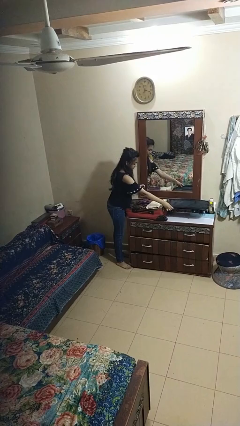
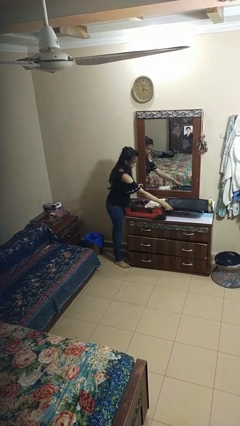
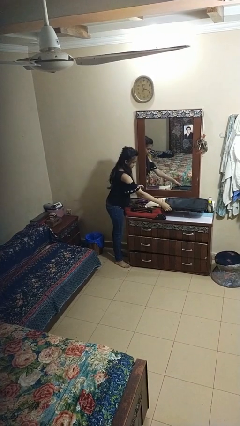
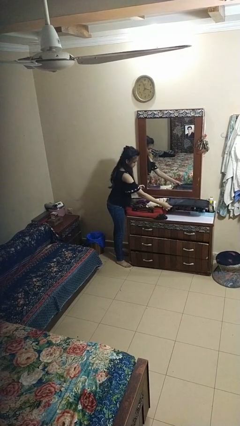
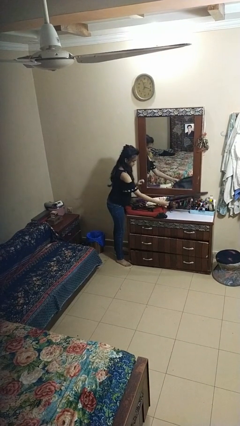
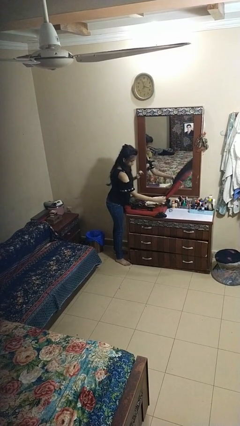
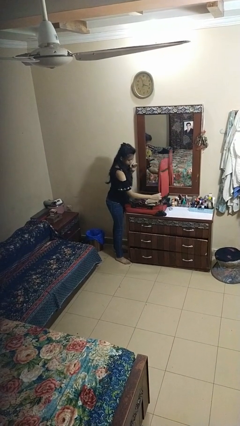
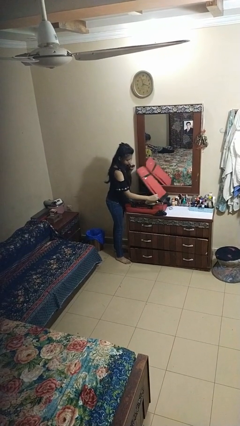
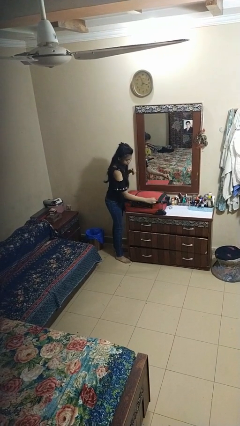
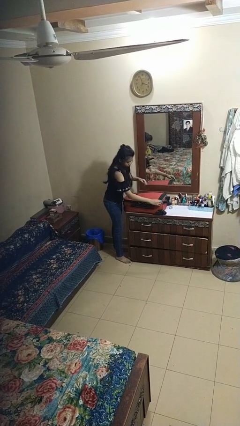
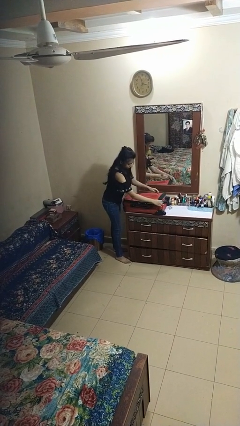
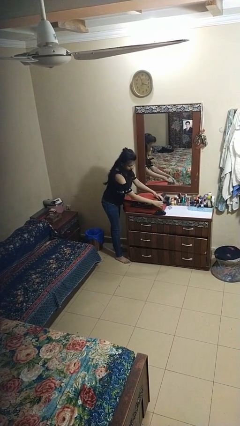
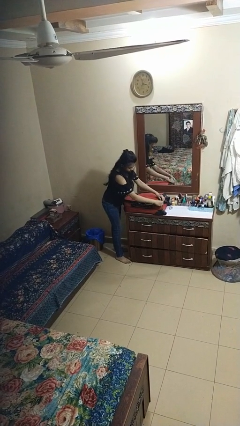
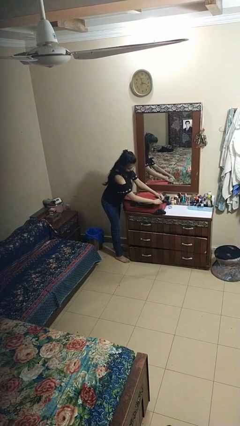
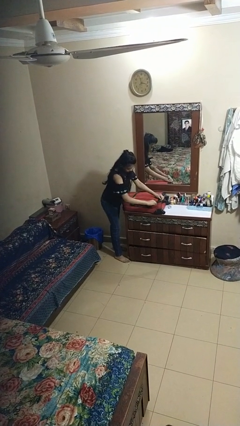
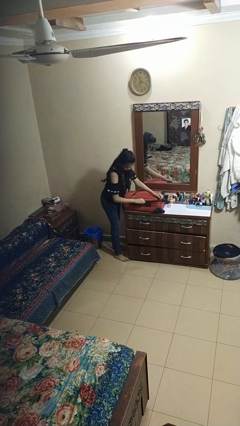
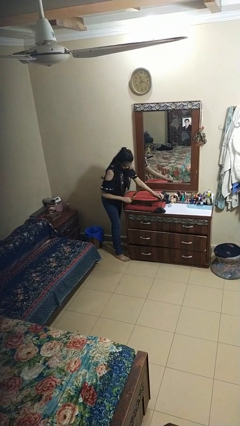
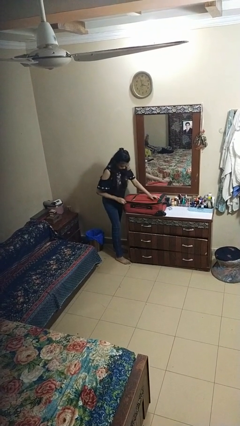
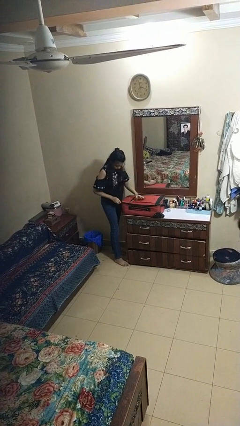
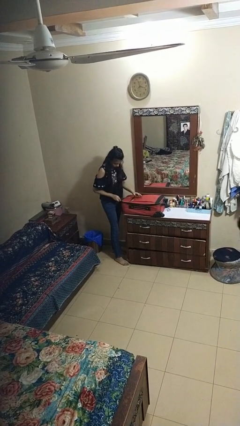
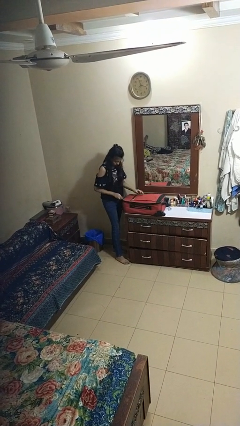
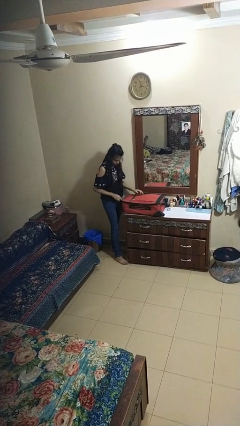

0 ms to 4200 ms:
person closes suitcase

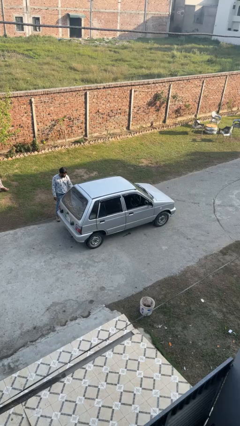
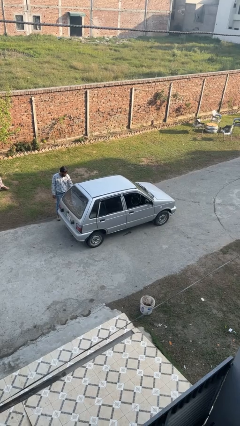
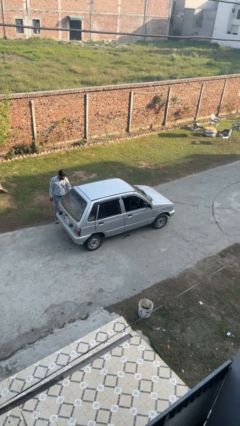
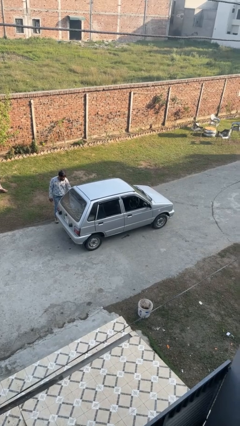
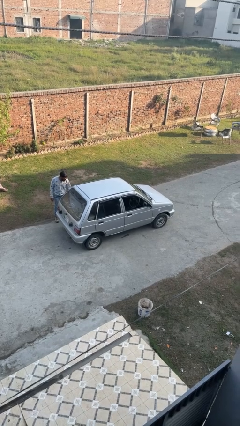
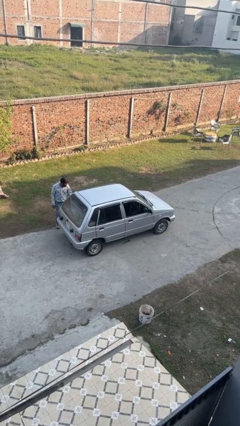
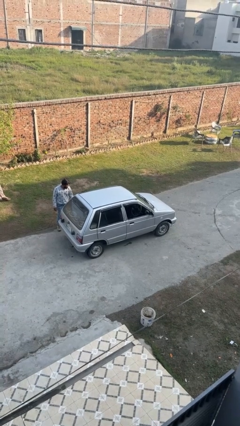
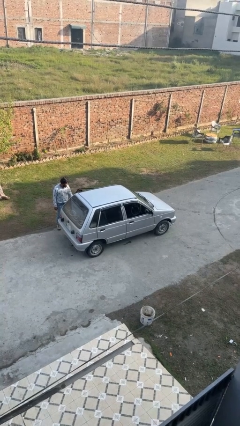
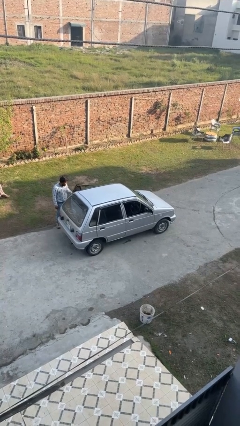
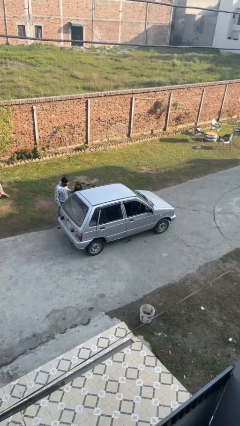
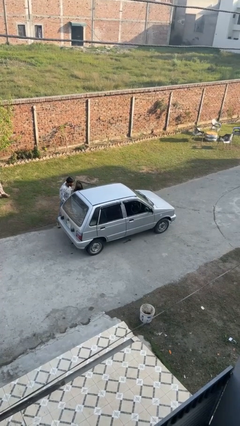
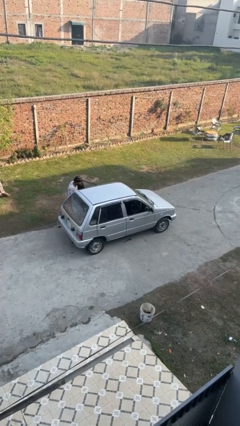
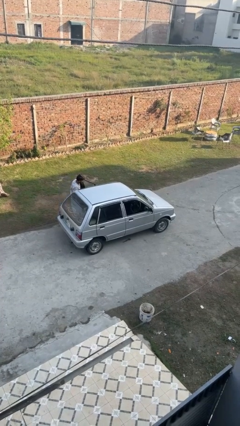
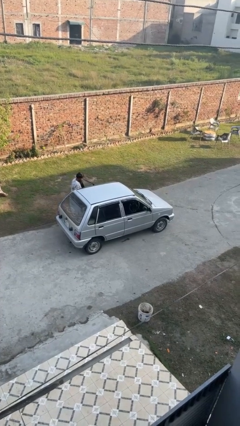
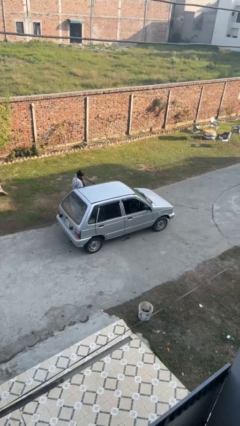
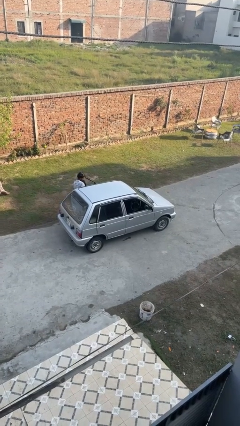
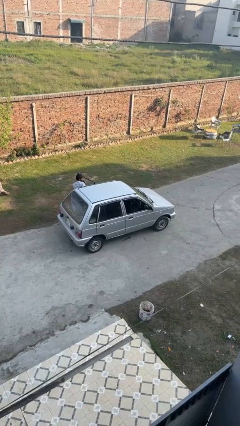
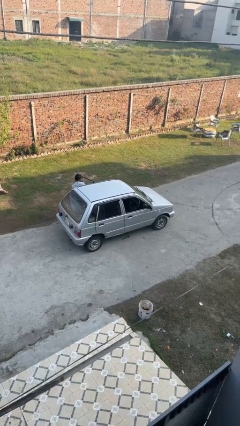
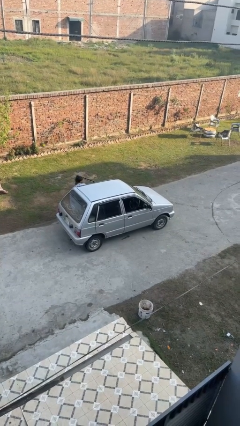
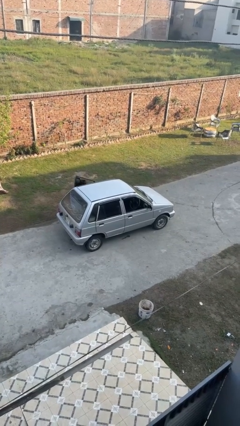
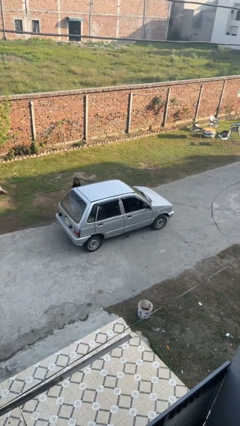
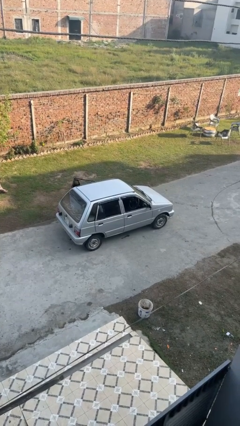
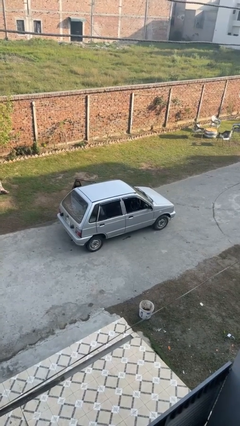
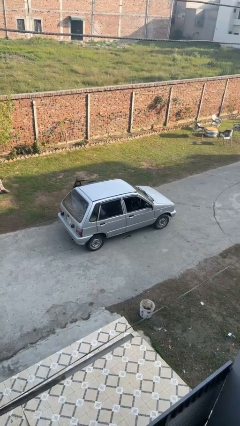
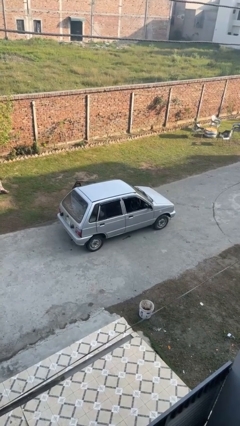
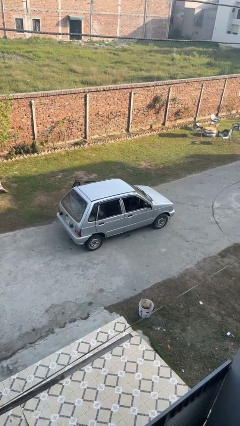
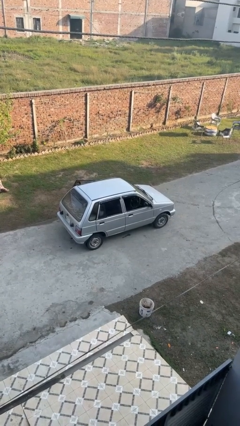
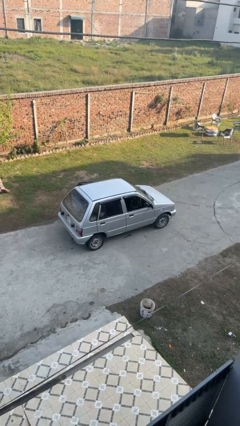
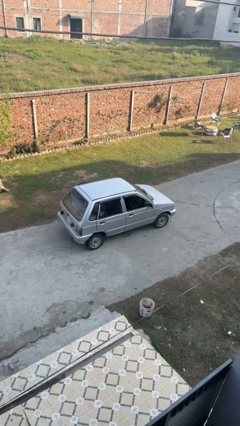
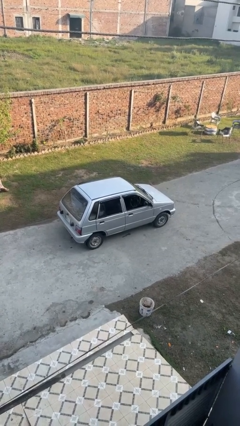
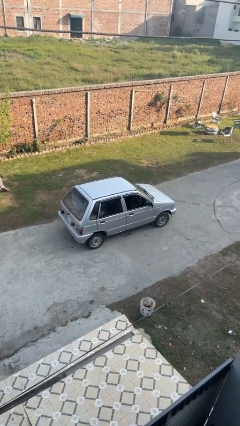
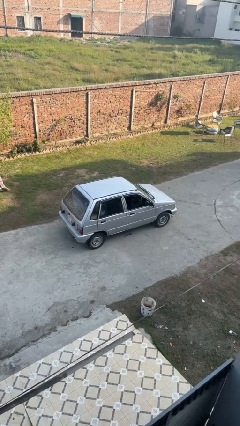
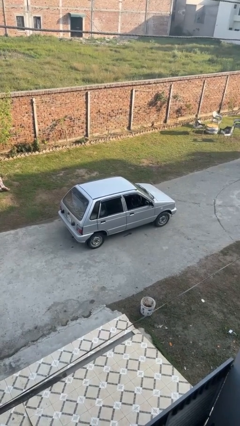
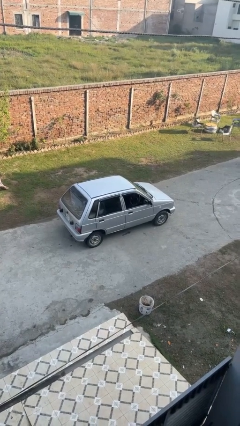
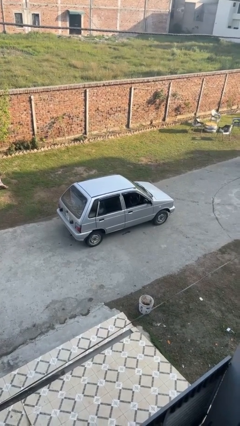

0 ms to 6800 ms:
car picks up person

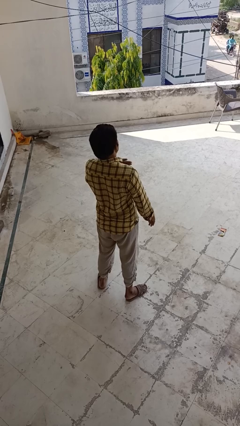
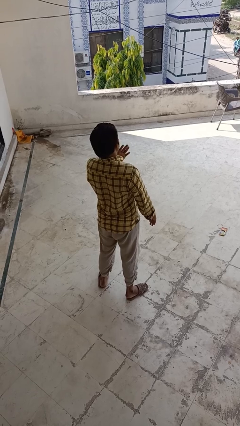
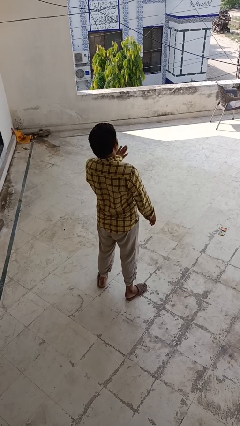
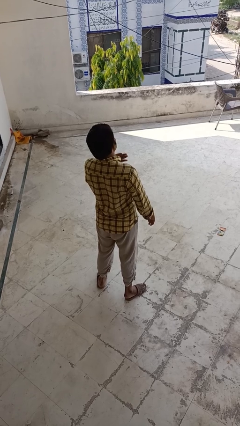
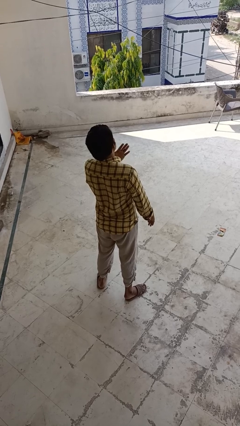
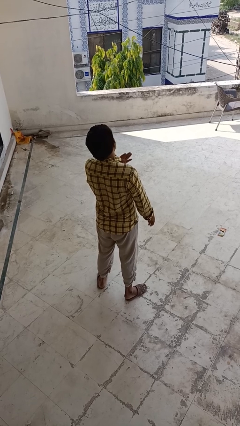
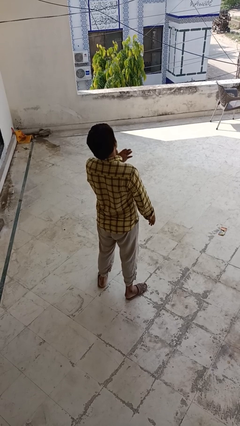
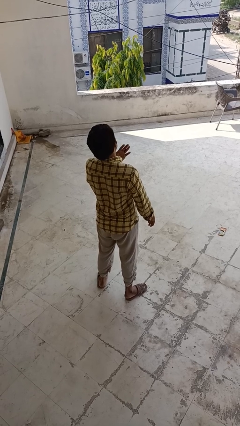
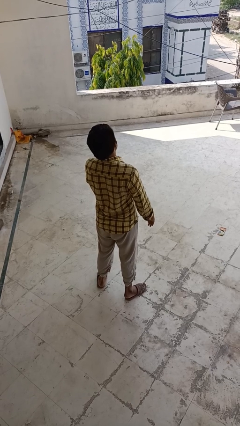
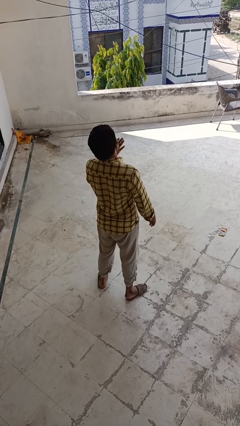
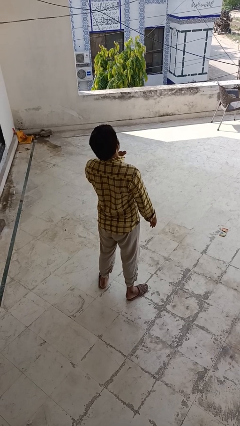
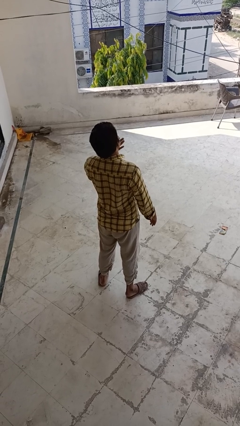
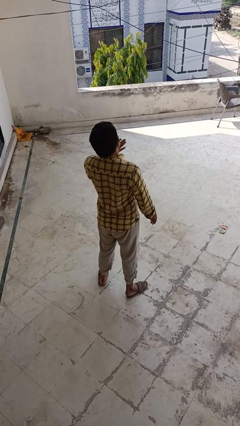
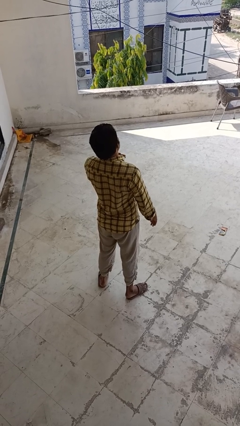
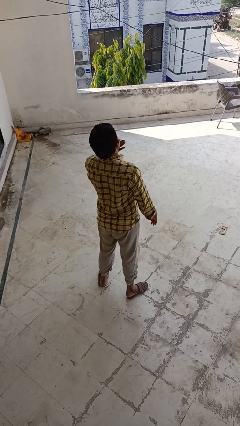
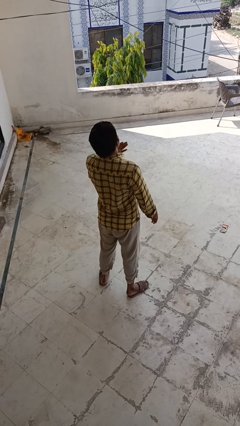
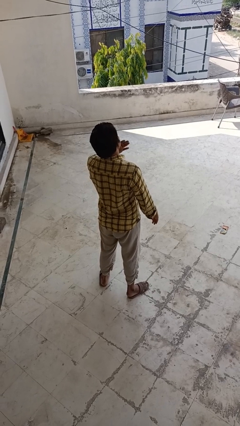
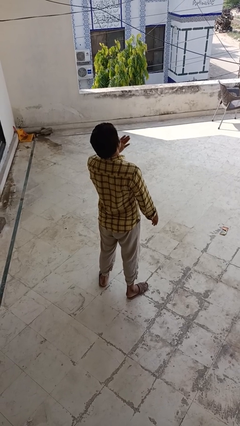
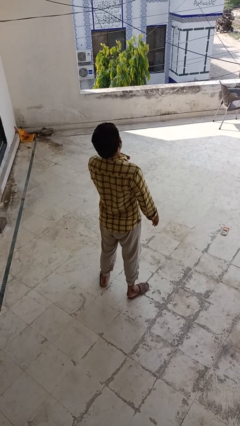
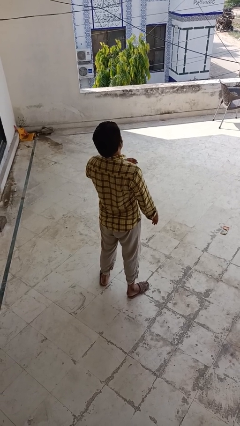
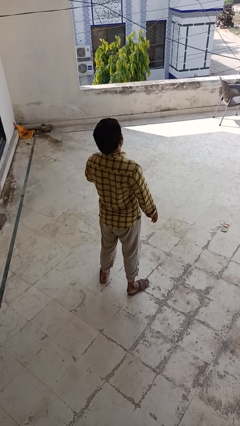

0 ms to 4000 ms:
person drums on chest

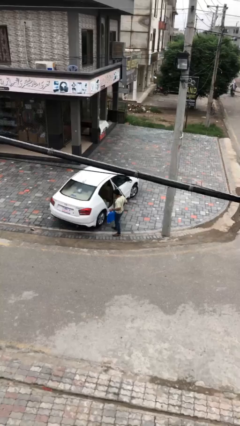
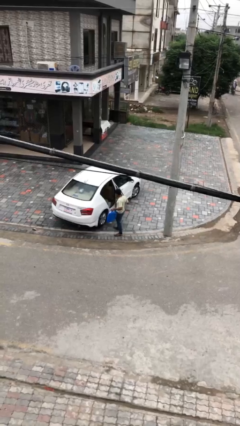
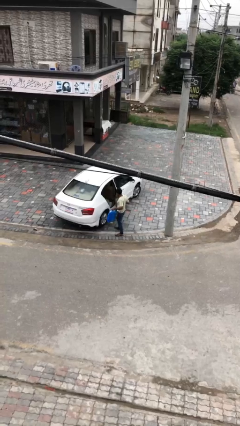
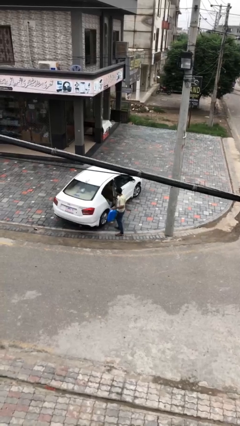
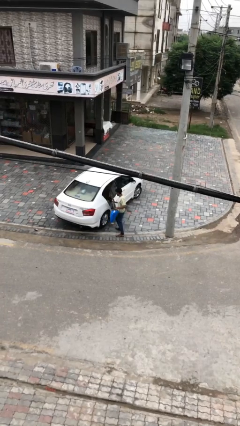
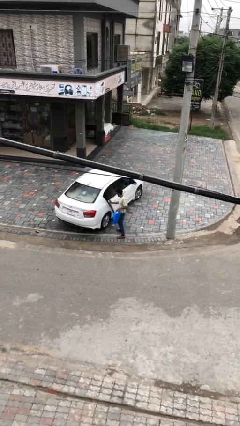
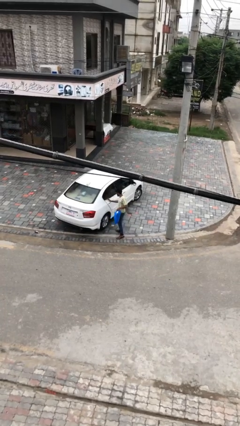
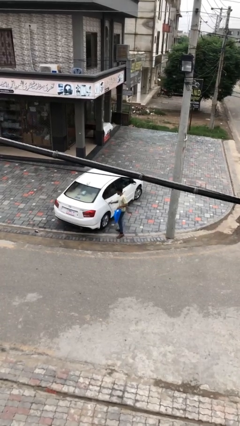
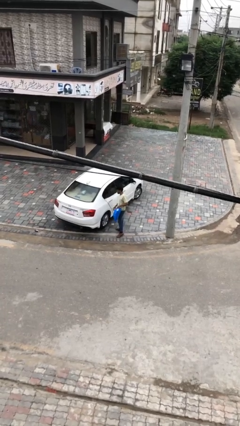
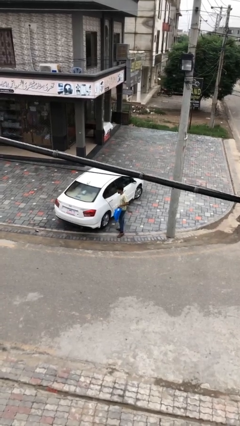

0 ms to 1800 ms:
person closes car door

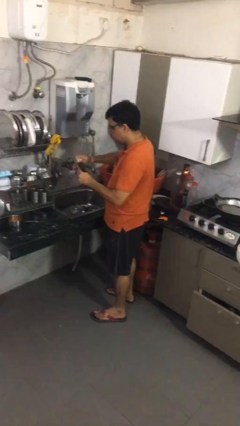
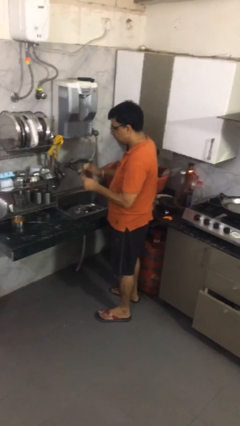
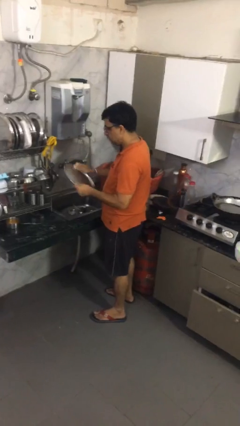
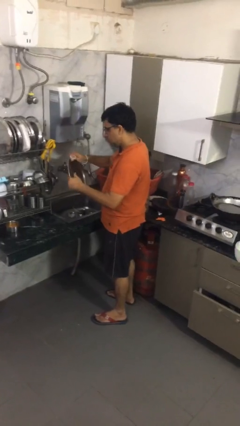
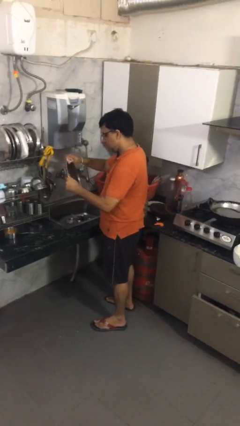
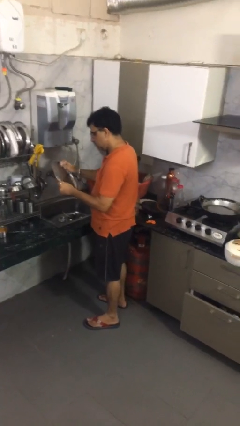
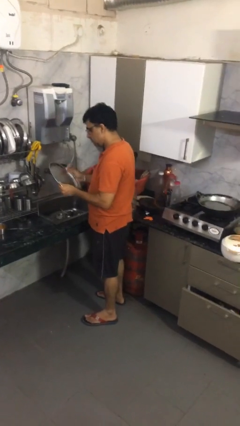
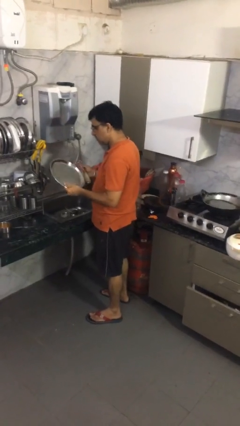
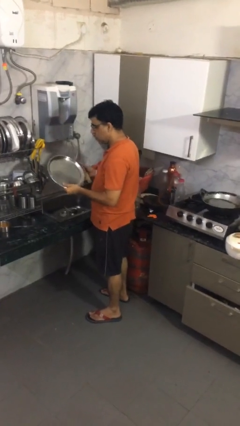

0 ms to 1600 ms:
person dries dish
